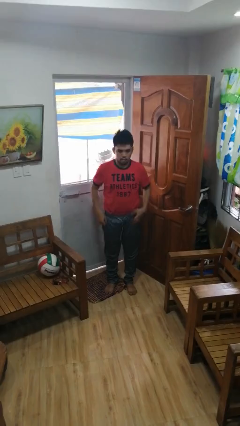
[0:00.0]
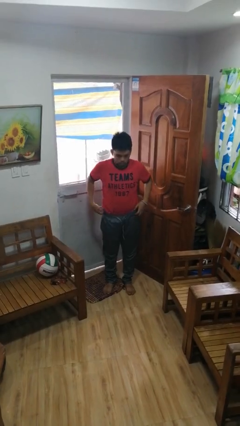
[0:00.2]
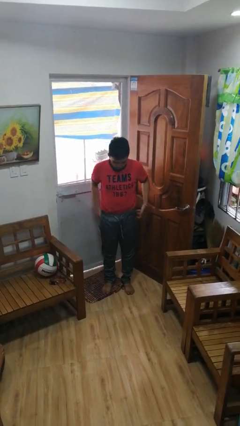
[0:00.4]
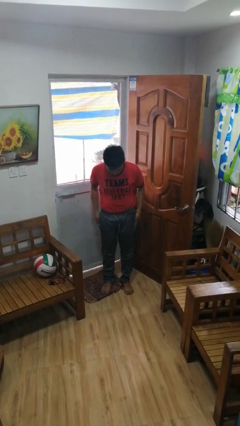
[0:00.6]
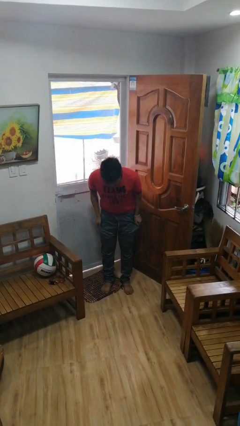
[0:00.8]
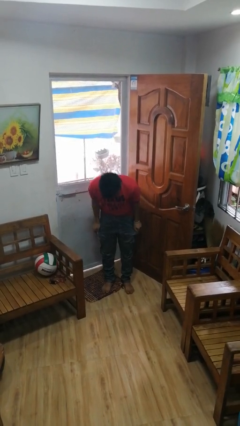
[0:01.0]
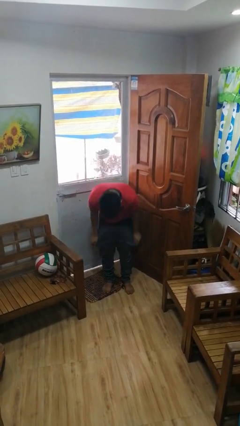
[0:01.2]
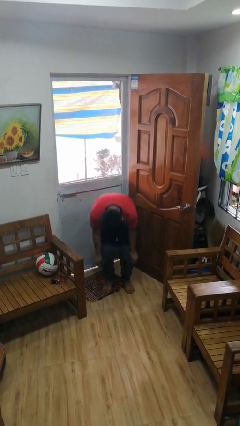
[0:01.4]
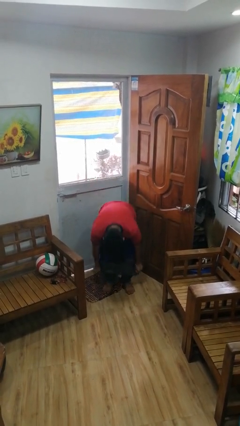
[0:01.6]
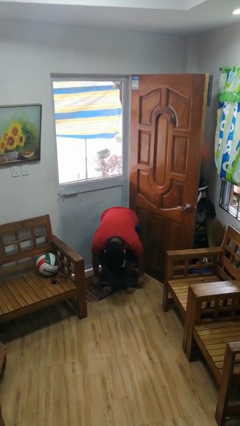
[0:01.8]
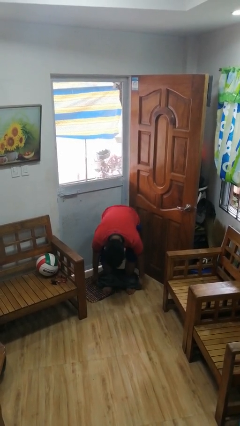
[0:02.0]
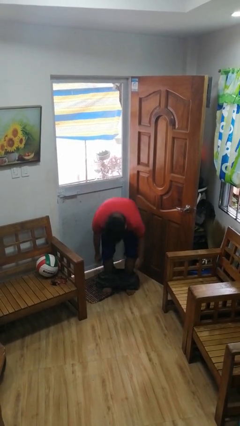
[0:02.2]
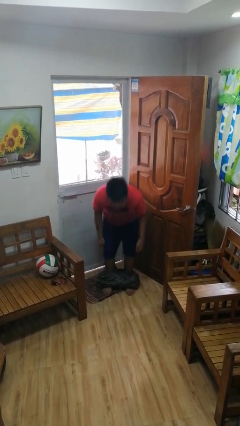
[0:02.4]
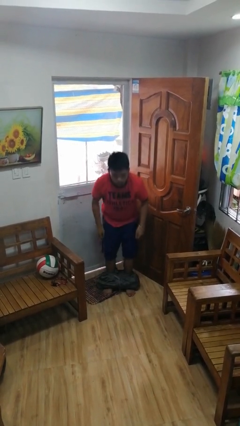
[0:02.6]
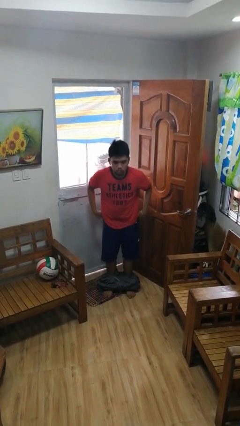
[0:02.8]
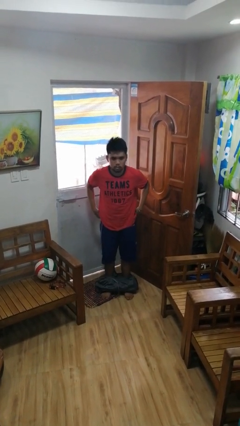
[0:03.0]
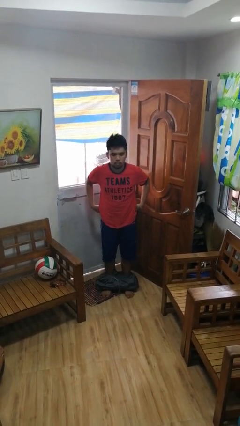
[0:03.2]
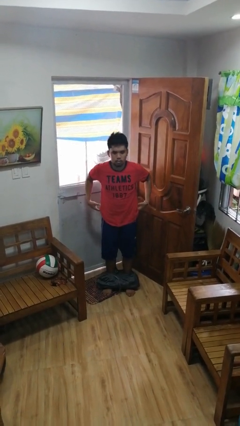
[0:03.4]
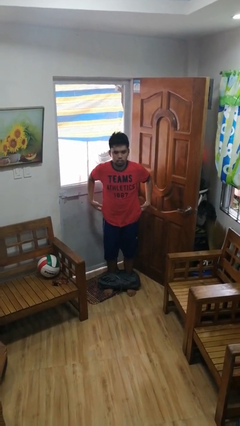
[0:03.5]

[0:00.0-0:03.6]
person takes off pants

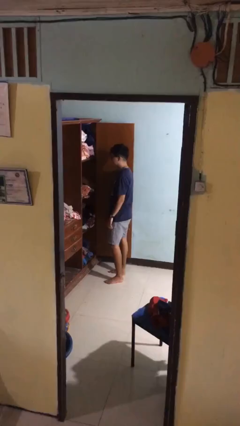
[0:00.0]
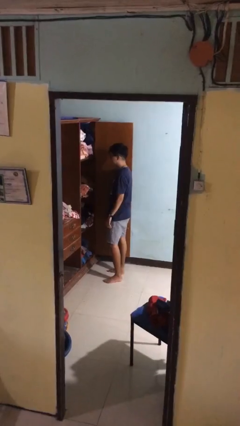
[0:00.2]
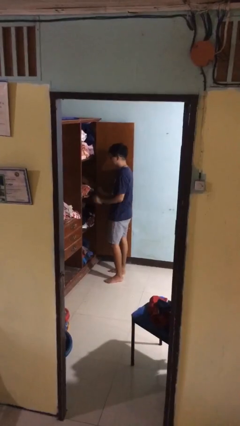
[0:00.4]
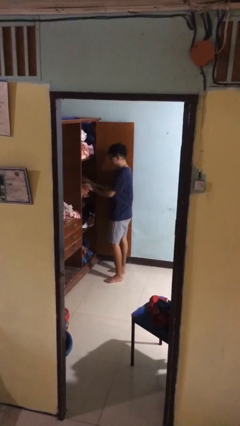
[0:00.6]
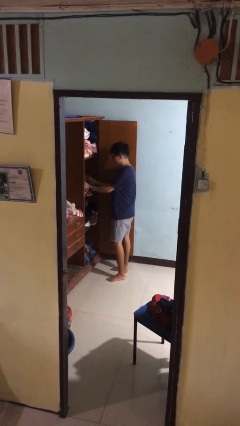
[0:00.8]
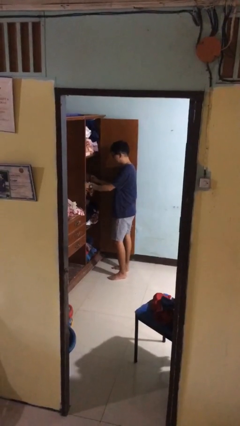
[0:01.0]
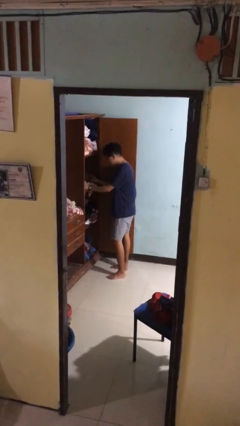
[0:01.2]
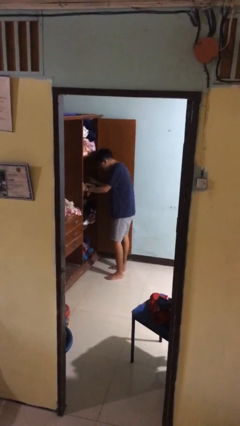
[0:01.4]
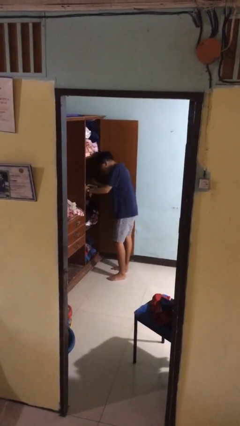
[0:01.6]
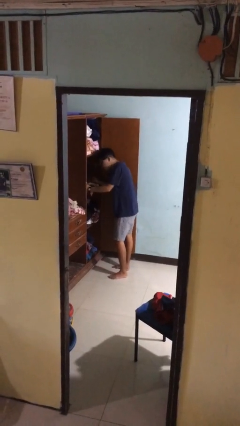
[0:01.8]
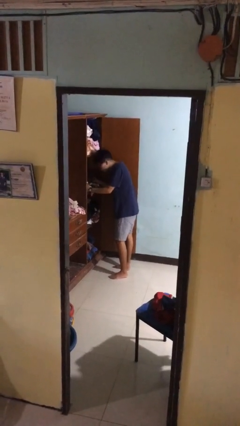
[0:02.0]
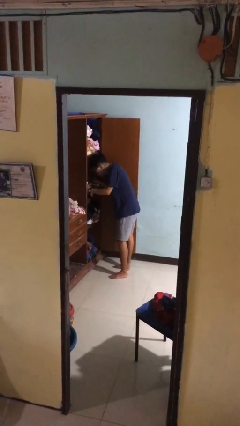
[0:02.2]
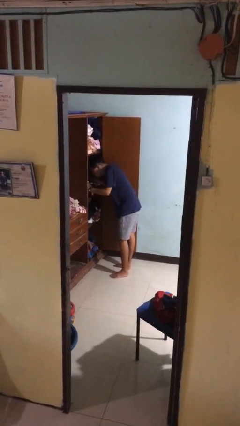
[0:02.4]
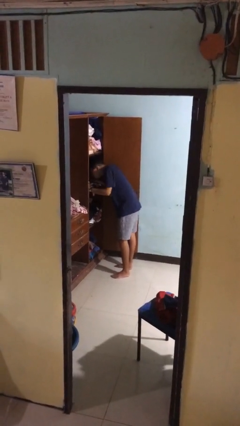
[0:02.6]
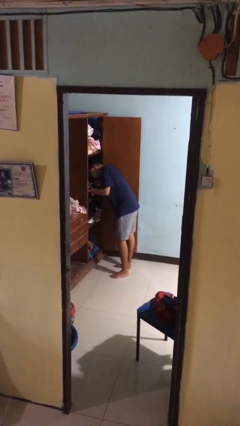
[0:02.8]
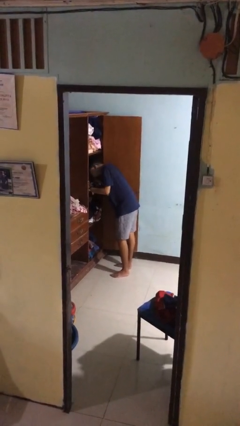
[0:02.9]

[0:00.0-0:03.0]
person searches in cabinet

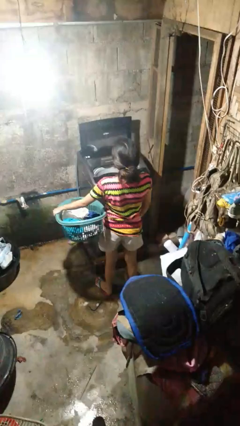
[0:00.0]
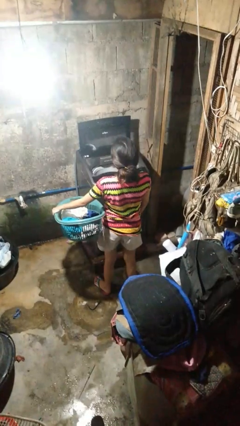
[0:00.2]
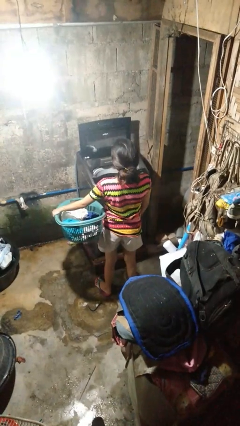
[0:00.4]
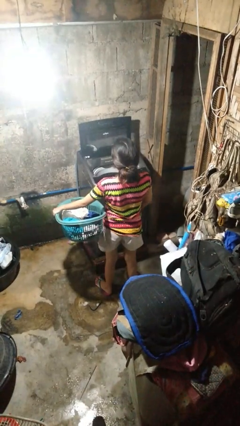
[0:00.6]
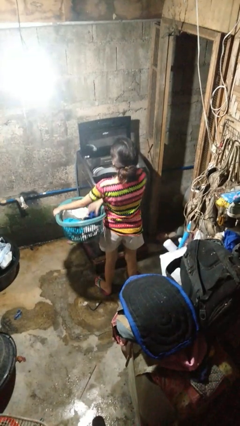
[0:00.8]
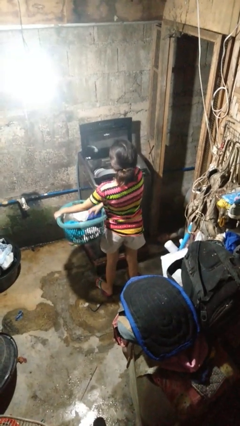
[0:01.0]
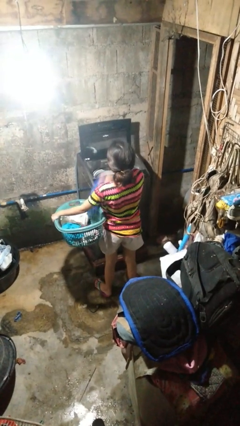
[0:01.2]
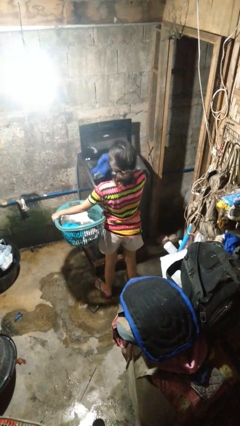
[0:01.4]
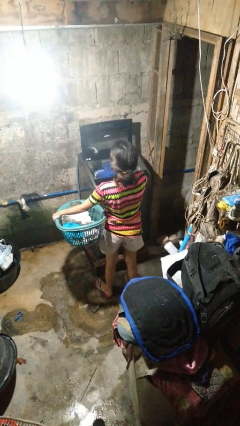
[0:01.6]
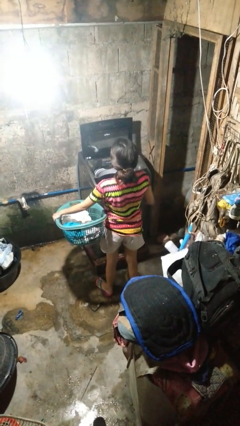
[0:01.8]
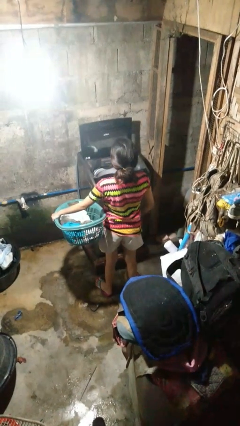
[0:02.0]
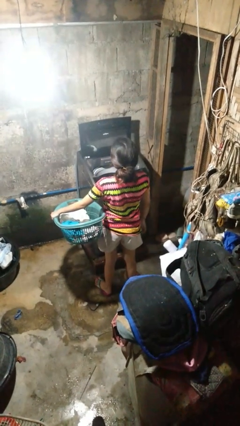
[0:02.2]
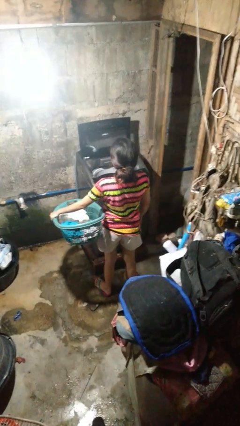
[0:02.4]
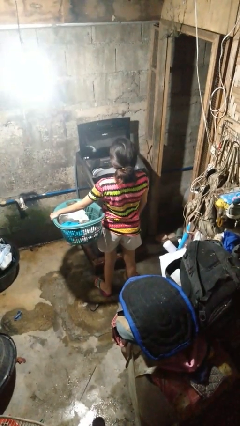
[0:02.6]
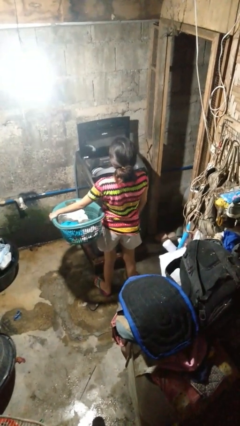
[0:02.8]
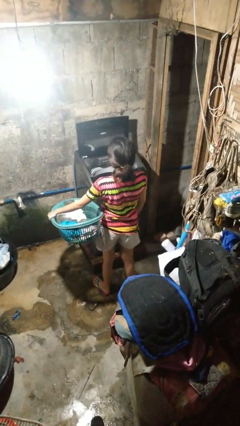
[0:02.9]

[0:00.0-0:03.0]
person loads clotheswasher

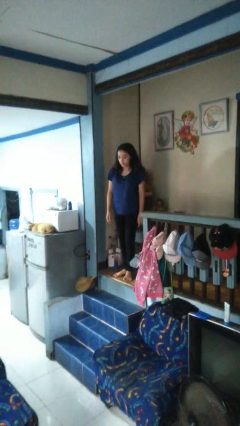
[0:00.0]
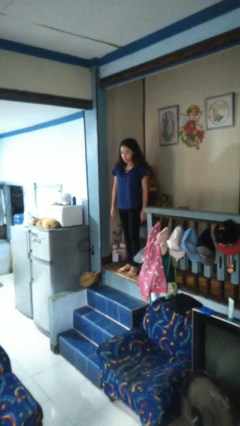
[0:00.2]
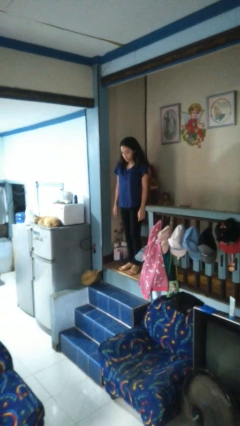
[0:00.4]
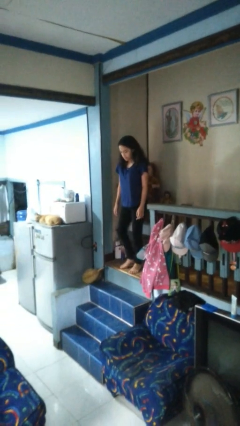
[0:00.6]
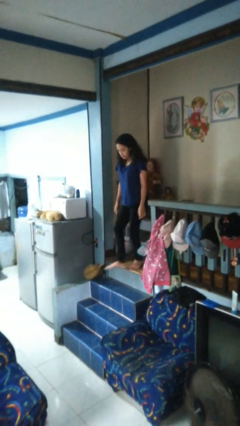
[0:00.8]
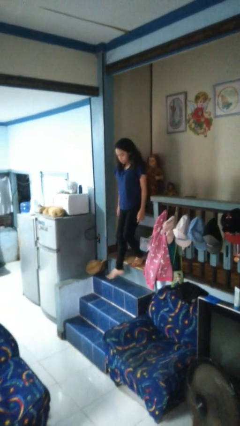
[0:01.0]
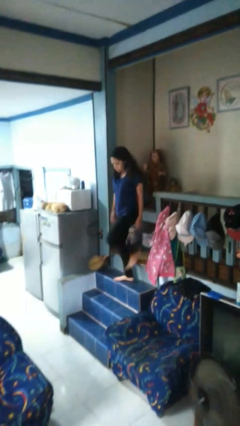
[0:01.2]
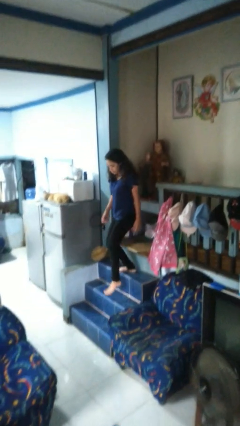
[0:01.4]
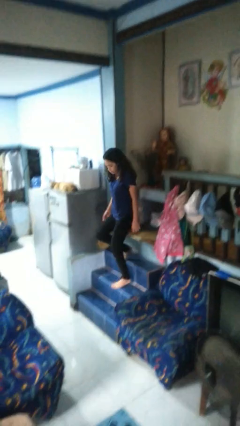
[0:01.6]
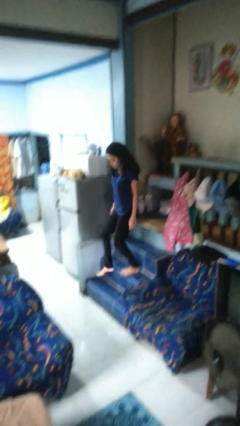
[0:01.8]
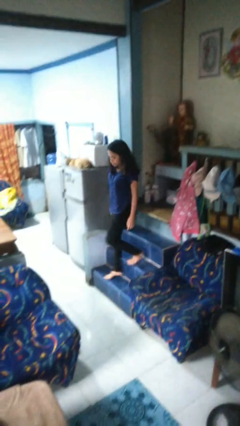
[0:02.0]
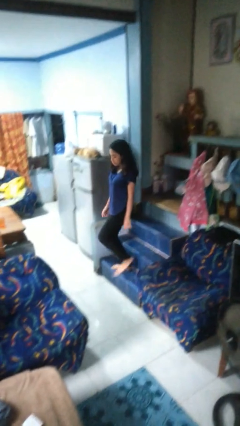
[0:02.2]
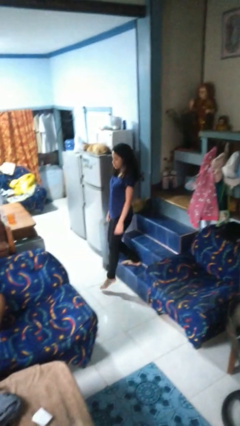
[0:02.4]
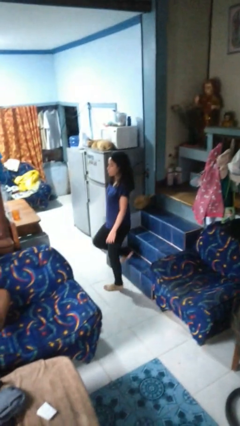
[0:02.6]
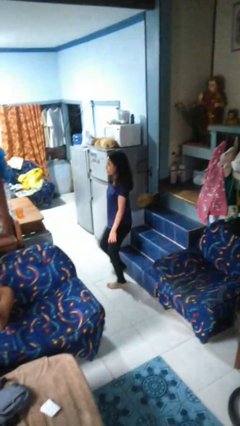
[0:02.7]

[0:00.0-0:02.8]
person climbs down stairs

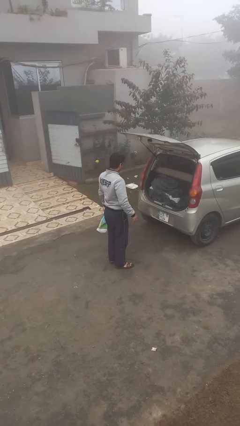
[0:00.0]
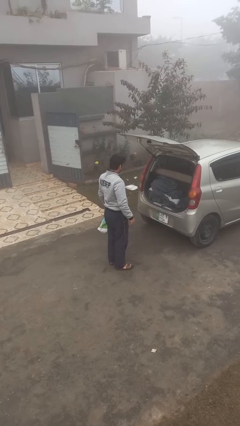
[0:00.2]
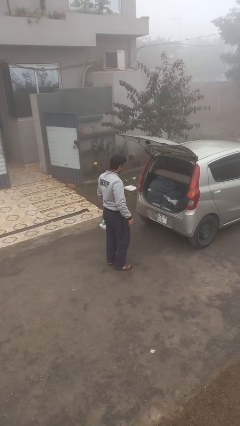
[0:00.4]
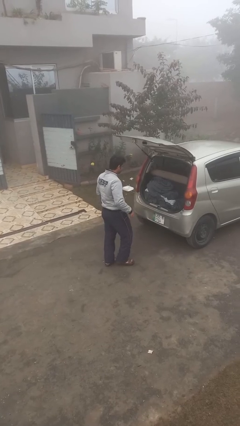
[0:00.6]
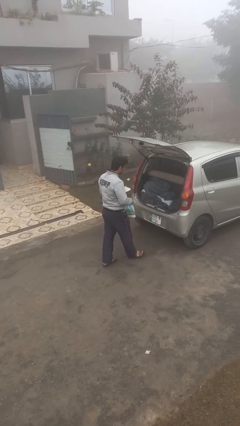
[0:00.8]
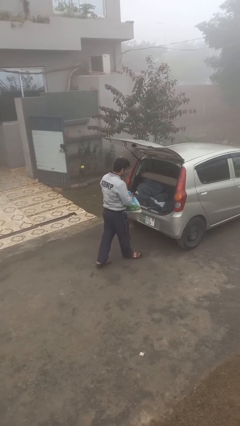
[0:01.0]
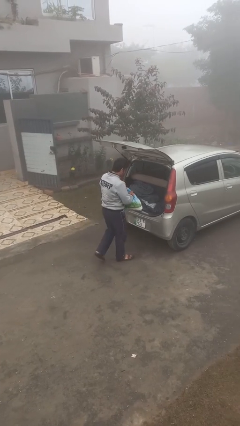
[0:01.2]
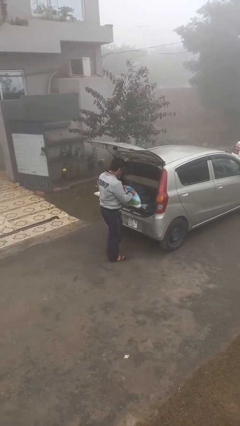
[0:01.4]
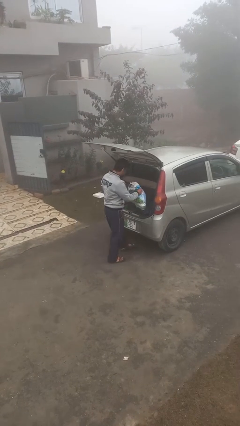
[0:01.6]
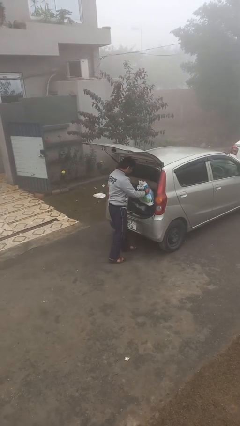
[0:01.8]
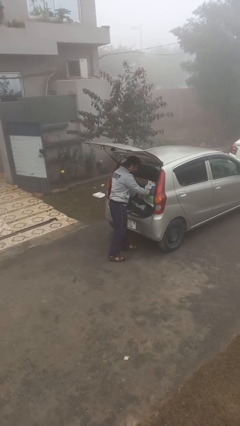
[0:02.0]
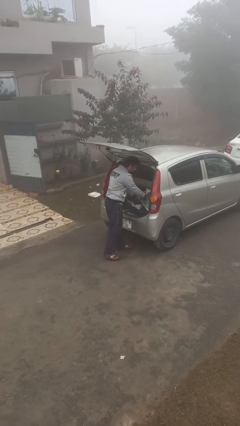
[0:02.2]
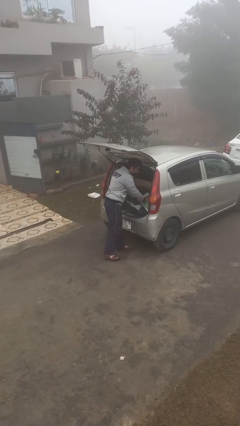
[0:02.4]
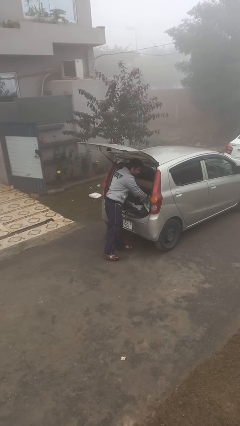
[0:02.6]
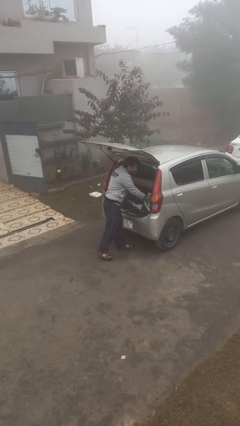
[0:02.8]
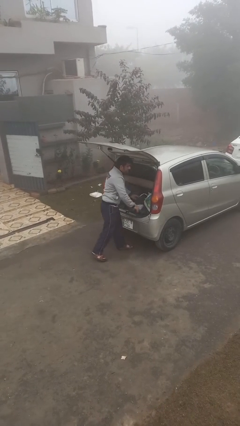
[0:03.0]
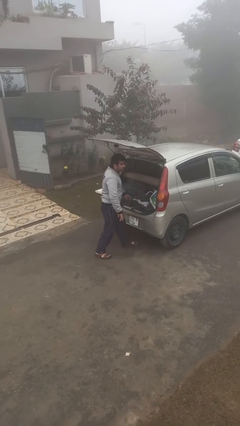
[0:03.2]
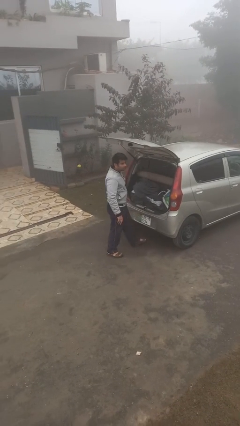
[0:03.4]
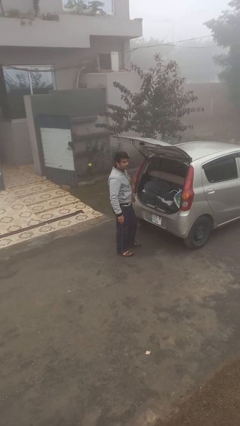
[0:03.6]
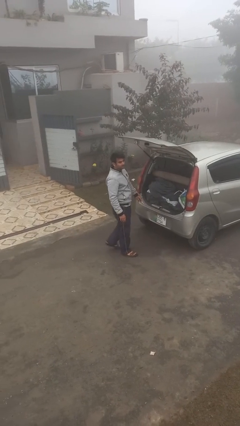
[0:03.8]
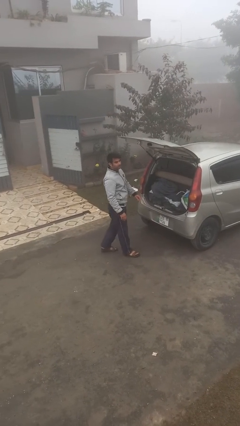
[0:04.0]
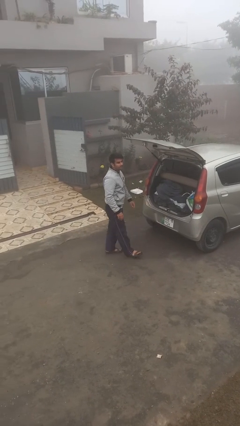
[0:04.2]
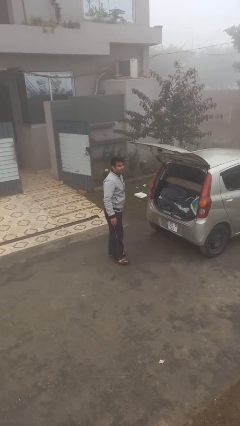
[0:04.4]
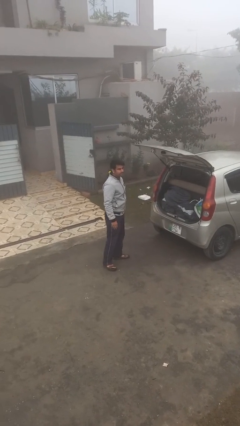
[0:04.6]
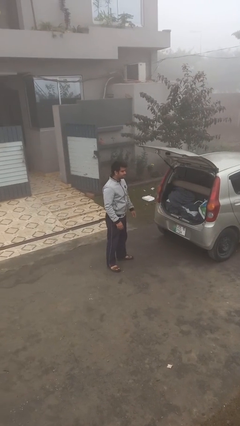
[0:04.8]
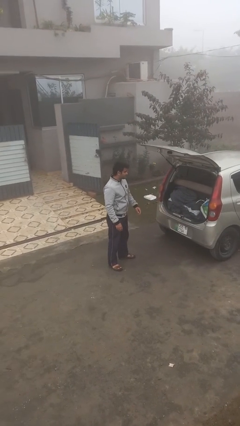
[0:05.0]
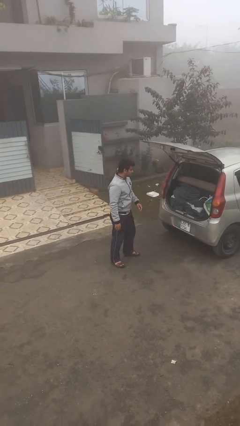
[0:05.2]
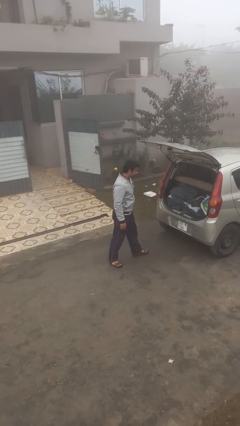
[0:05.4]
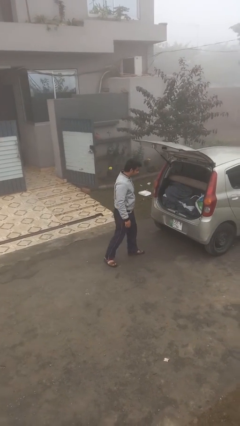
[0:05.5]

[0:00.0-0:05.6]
person loads car
